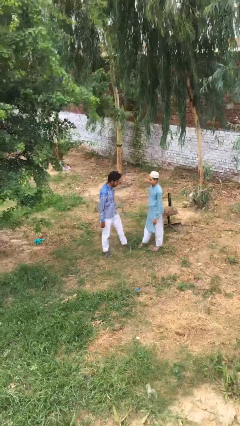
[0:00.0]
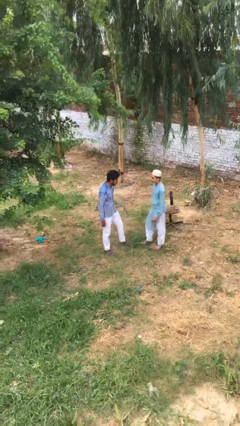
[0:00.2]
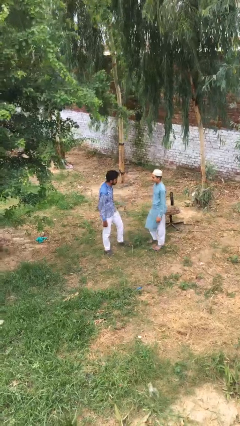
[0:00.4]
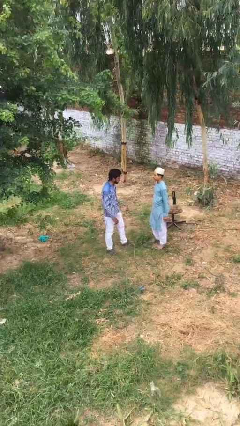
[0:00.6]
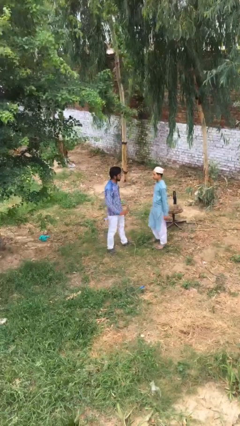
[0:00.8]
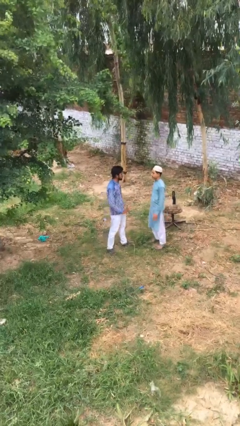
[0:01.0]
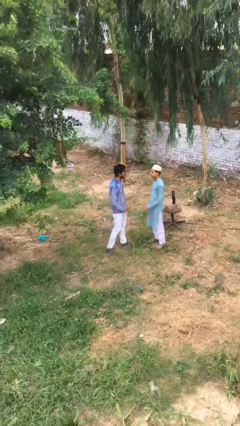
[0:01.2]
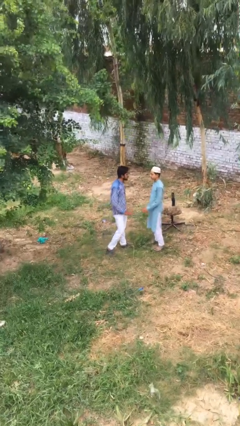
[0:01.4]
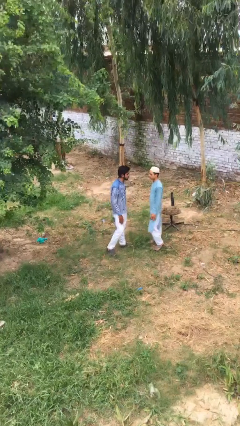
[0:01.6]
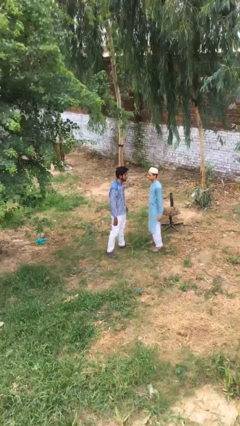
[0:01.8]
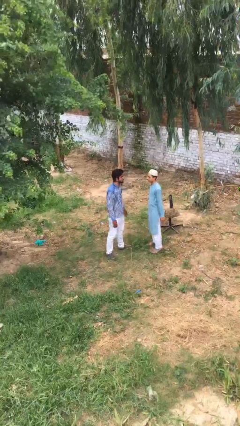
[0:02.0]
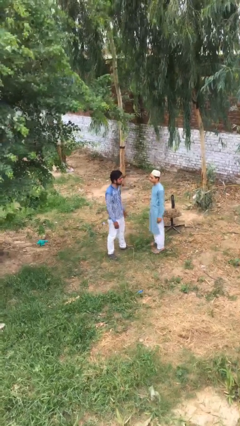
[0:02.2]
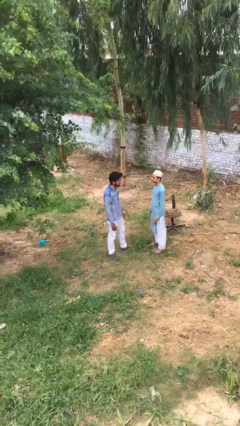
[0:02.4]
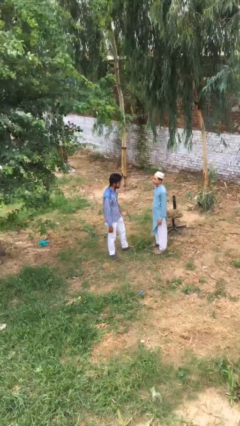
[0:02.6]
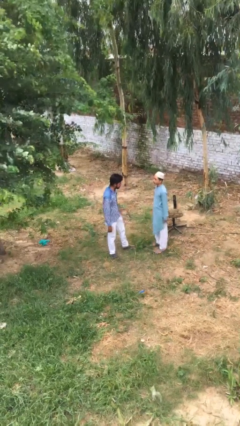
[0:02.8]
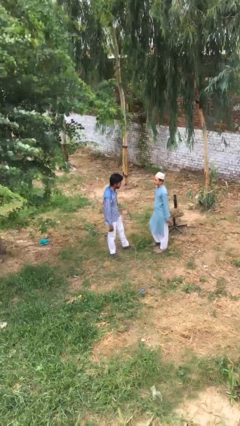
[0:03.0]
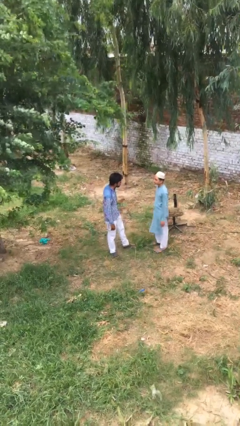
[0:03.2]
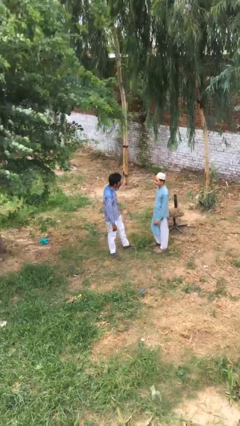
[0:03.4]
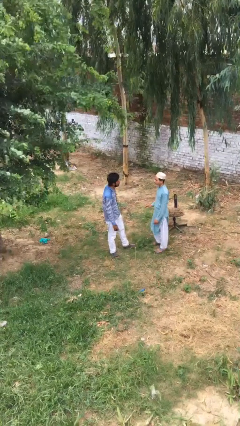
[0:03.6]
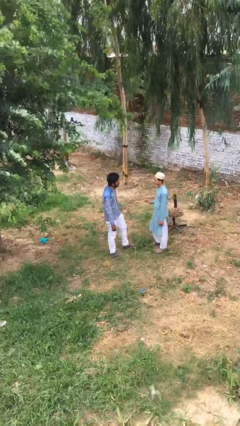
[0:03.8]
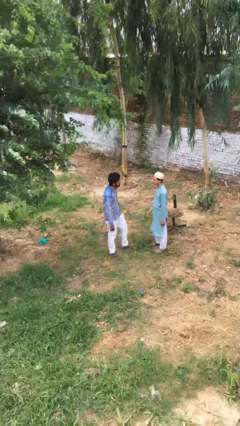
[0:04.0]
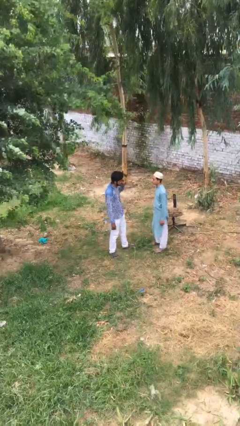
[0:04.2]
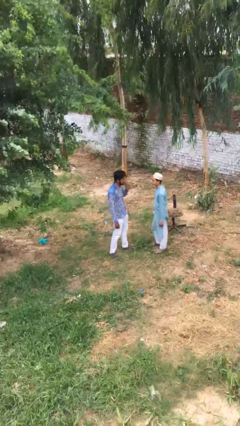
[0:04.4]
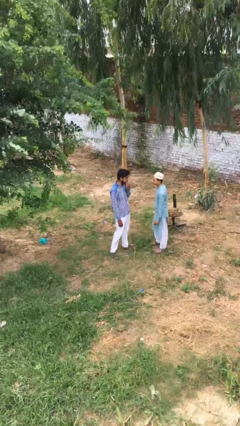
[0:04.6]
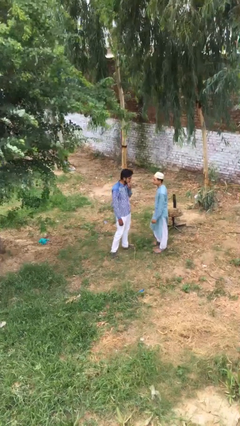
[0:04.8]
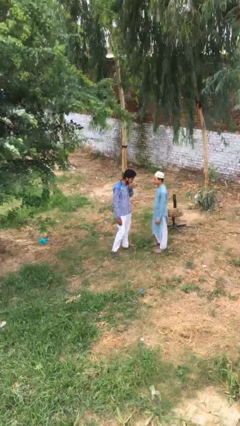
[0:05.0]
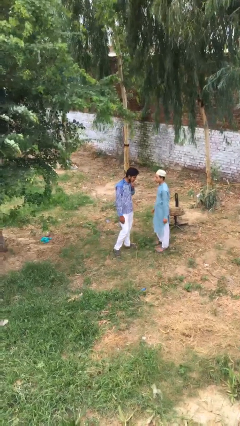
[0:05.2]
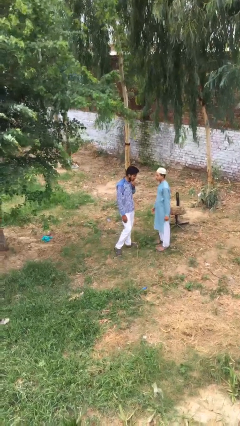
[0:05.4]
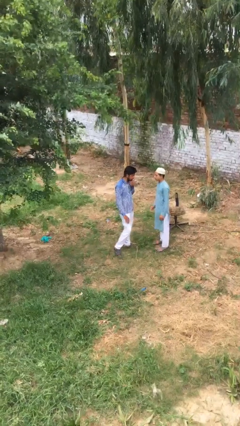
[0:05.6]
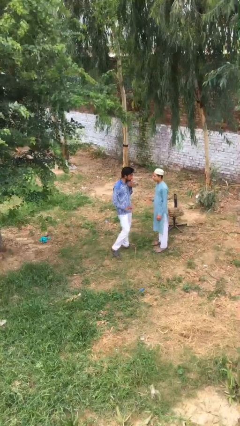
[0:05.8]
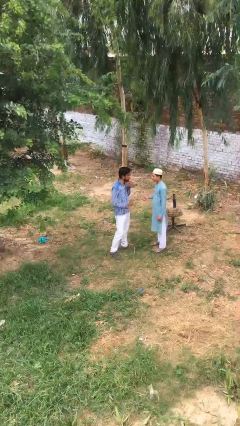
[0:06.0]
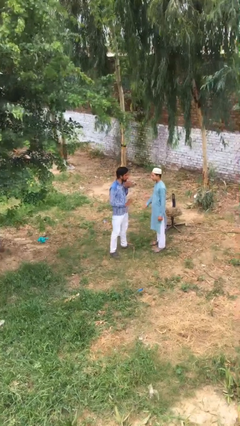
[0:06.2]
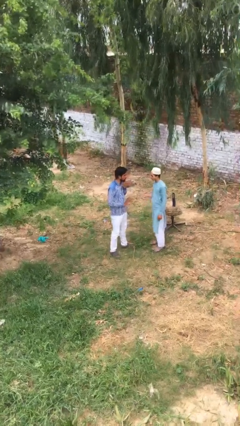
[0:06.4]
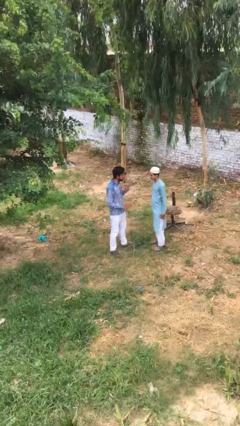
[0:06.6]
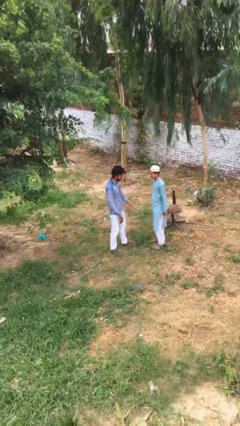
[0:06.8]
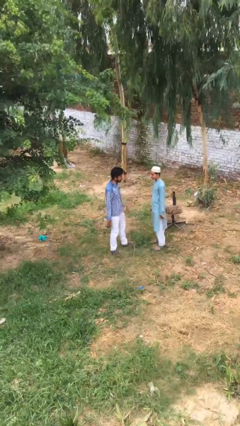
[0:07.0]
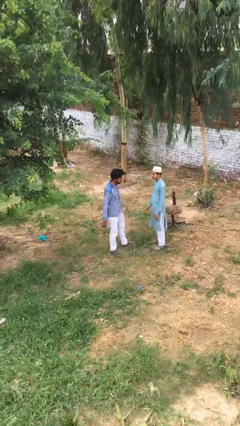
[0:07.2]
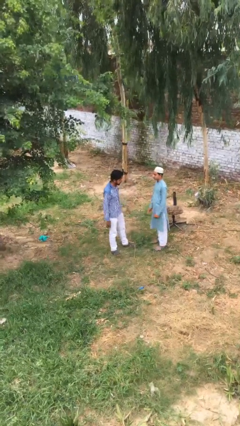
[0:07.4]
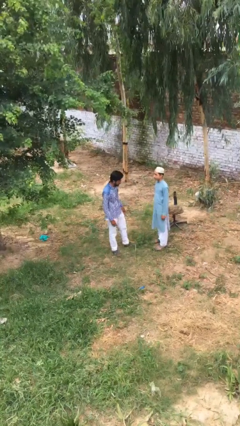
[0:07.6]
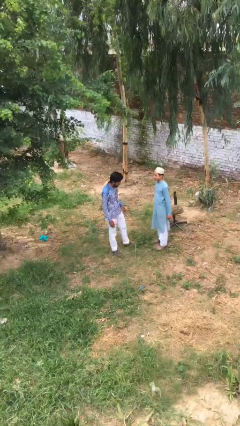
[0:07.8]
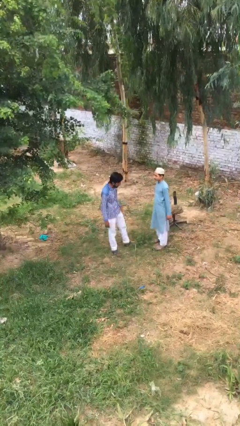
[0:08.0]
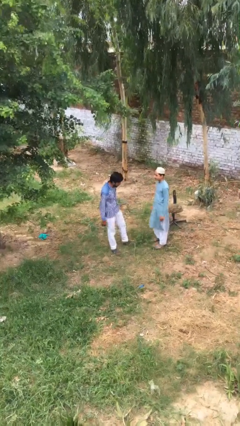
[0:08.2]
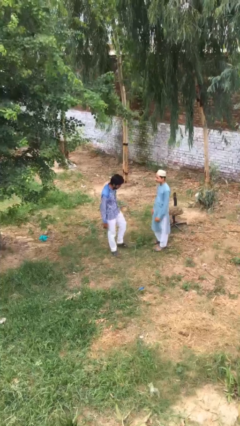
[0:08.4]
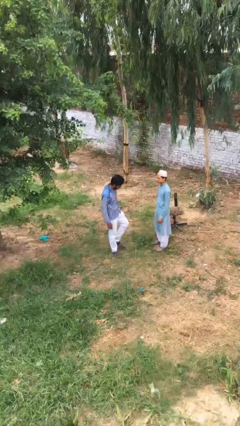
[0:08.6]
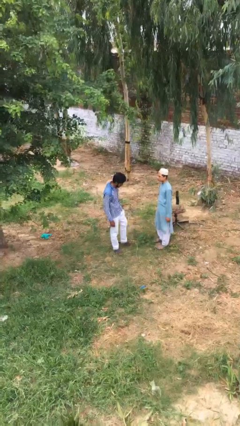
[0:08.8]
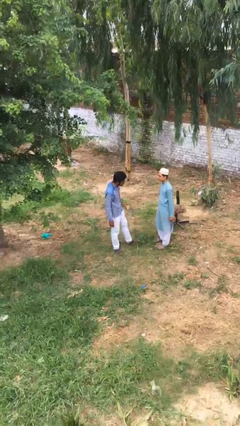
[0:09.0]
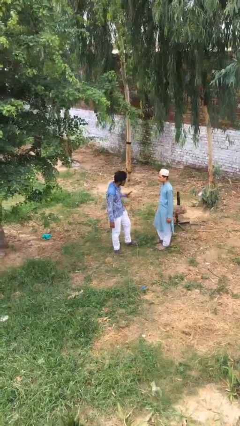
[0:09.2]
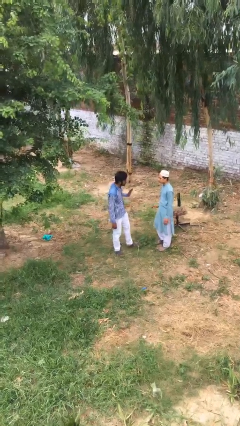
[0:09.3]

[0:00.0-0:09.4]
person talks to person

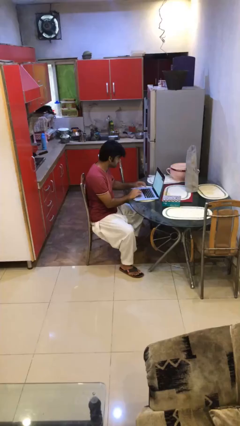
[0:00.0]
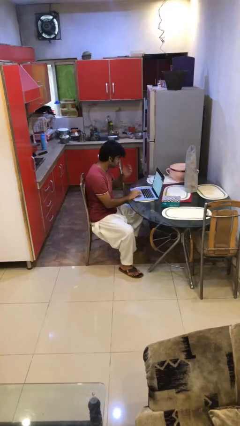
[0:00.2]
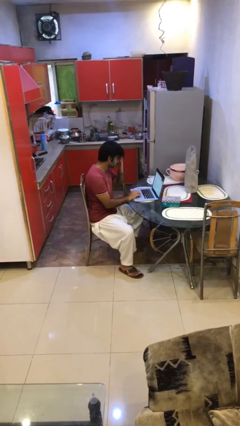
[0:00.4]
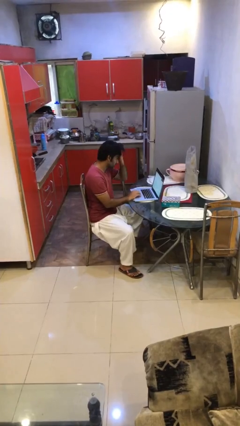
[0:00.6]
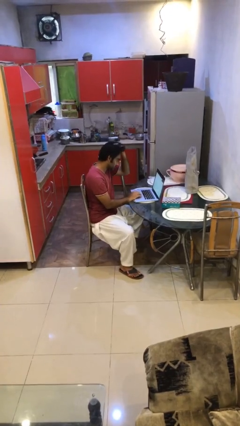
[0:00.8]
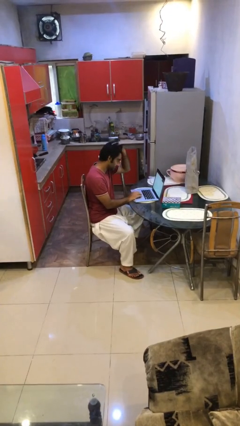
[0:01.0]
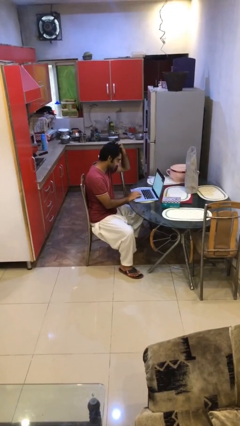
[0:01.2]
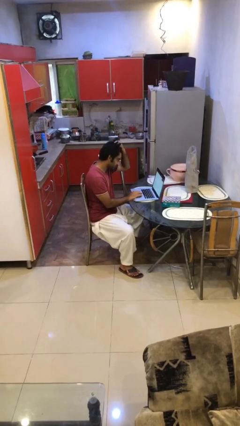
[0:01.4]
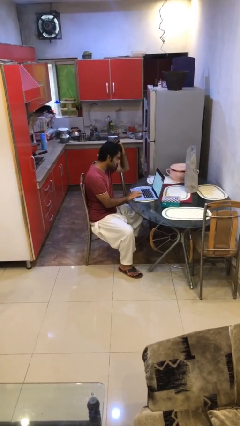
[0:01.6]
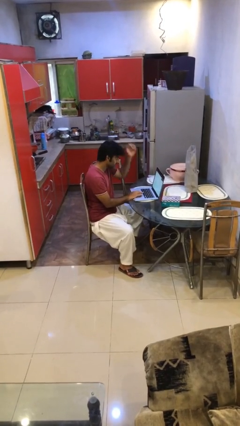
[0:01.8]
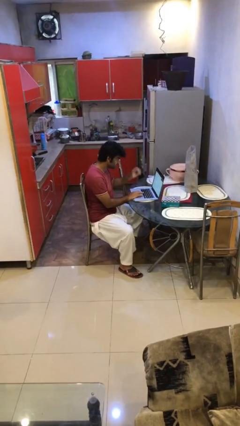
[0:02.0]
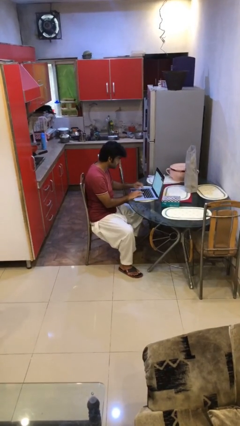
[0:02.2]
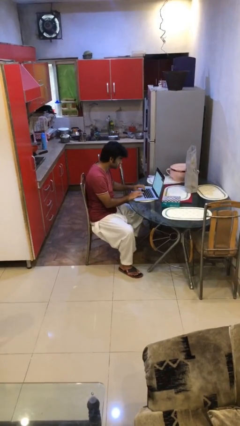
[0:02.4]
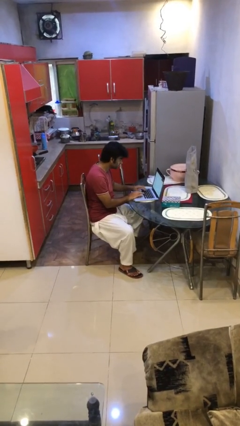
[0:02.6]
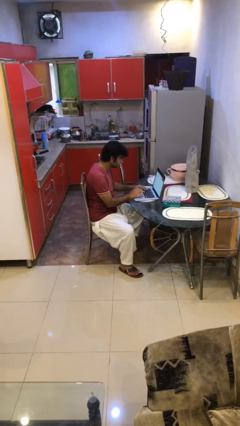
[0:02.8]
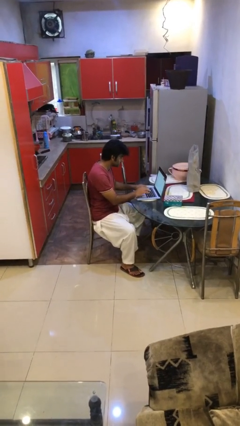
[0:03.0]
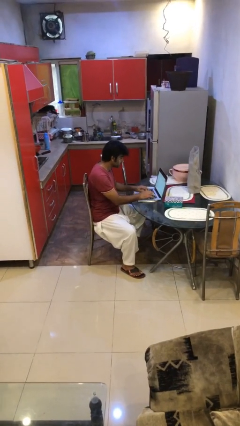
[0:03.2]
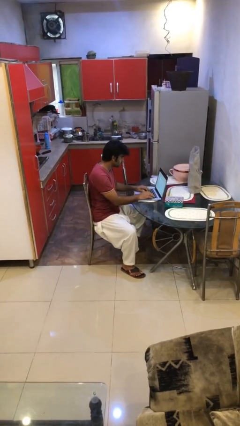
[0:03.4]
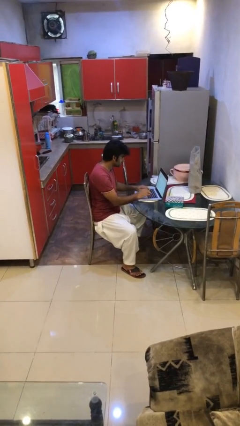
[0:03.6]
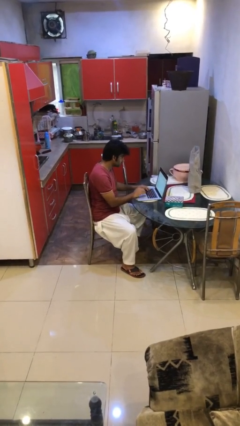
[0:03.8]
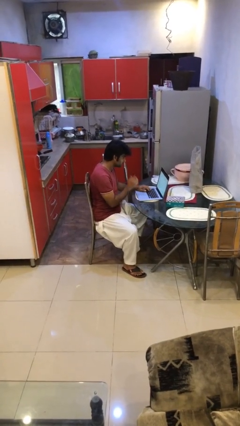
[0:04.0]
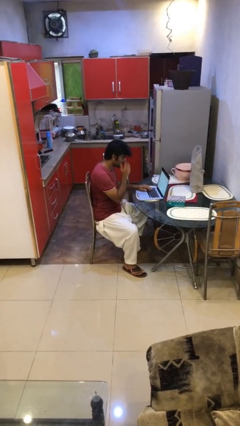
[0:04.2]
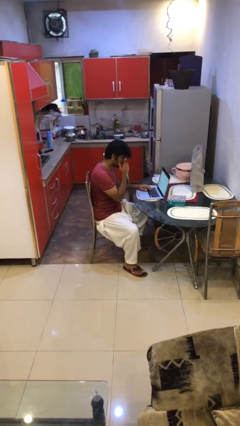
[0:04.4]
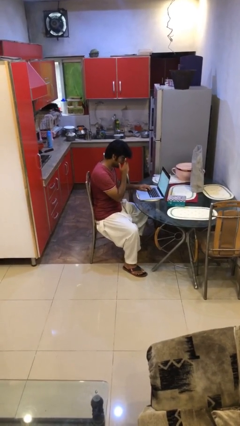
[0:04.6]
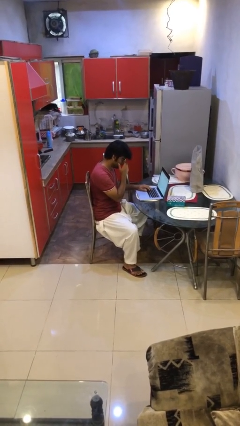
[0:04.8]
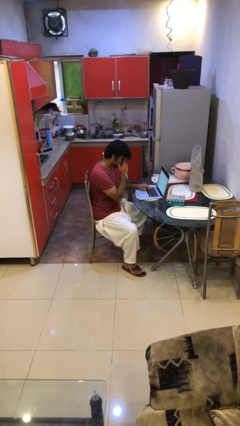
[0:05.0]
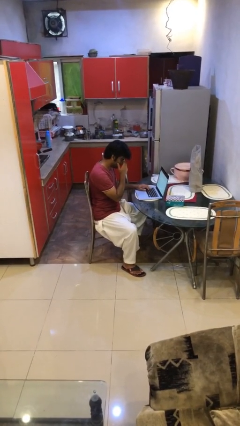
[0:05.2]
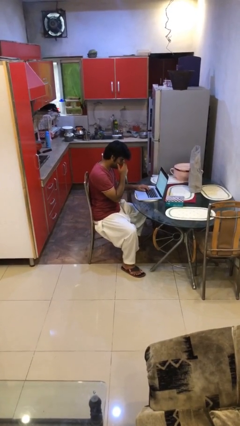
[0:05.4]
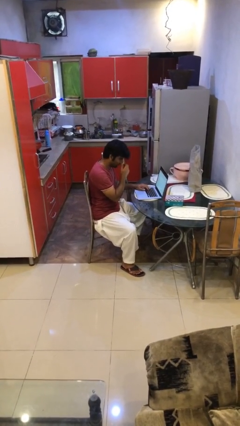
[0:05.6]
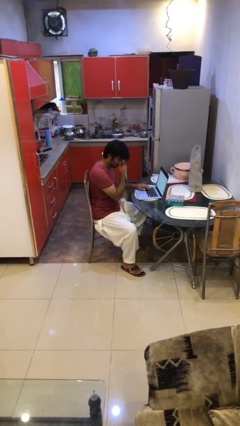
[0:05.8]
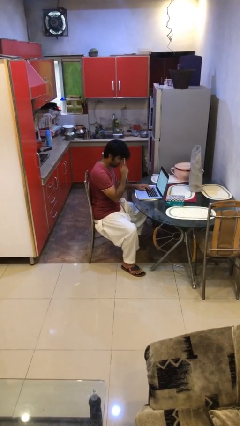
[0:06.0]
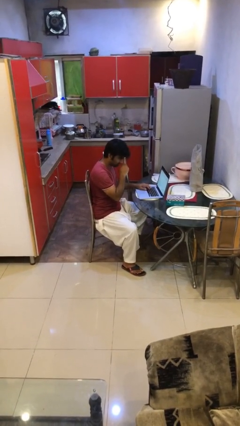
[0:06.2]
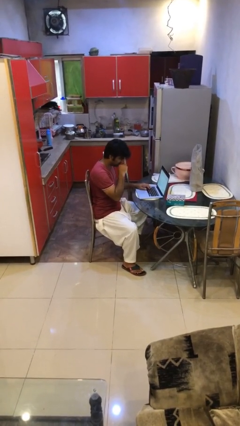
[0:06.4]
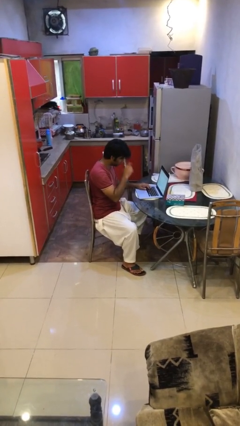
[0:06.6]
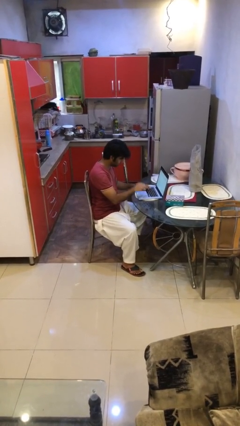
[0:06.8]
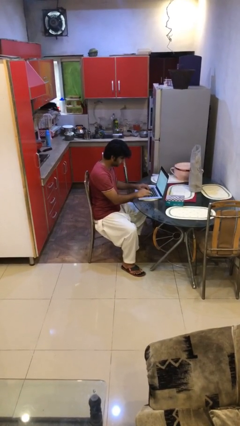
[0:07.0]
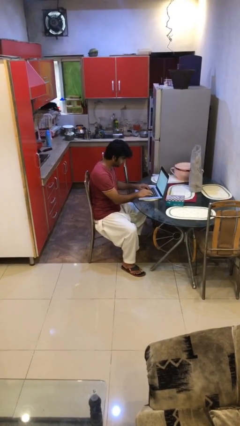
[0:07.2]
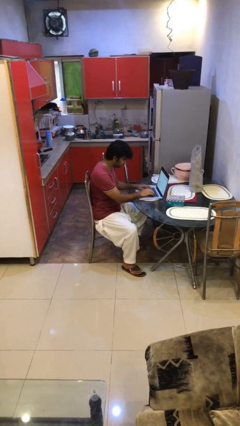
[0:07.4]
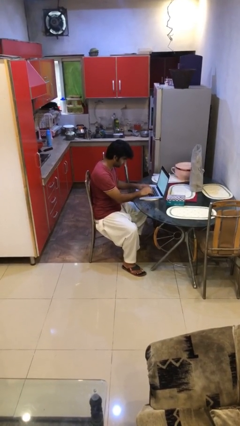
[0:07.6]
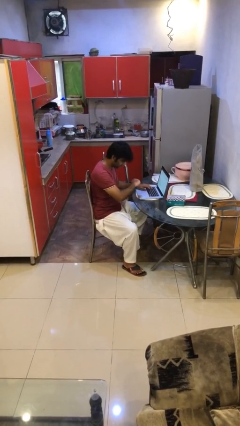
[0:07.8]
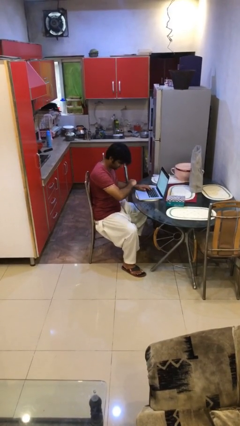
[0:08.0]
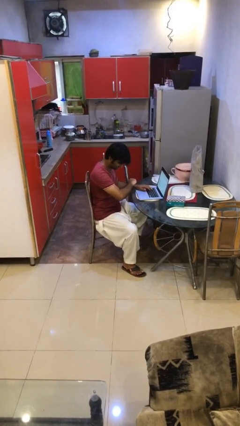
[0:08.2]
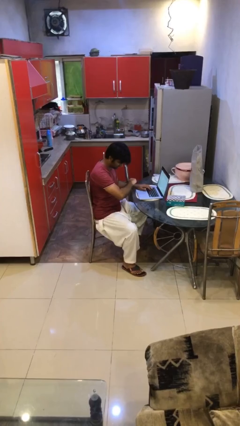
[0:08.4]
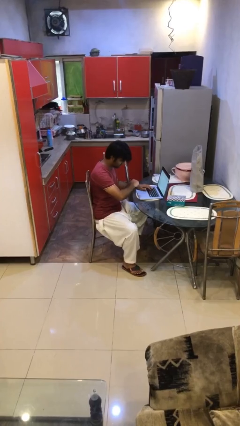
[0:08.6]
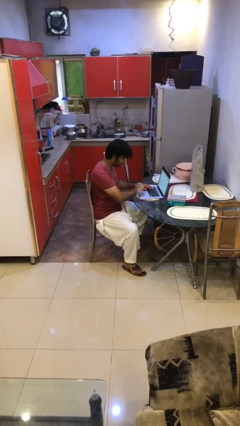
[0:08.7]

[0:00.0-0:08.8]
person interacts with laptop

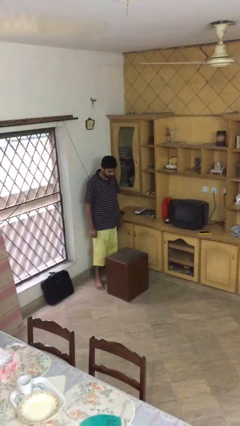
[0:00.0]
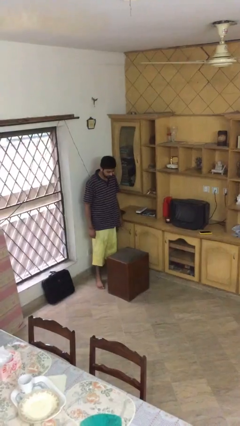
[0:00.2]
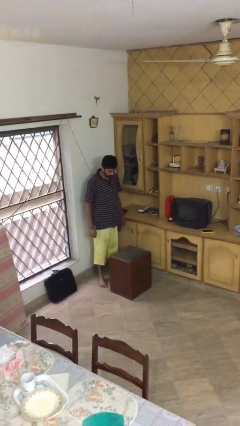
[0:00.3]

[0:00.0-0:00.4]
person picks up object from floor
